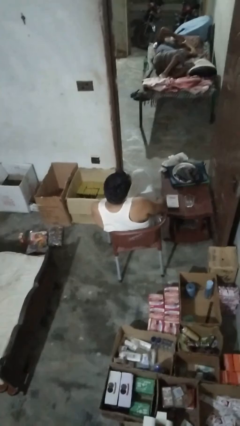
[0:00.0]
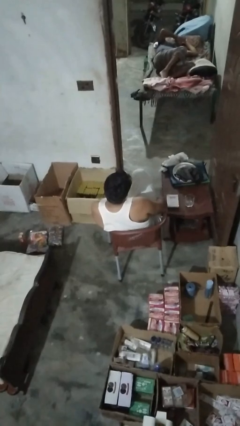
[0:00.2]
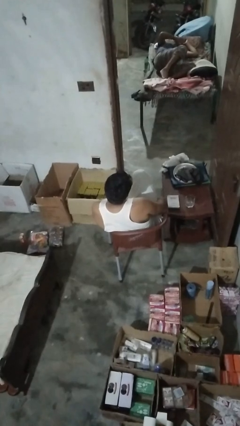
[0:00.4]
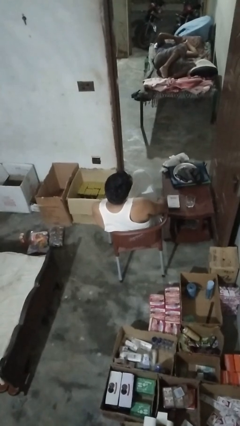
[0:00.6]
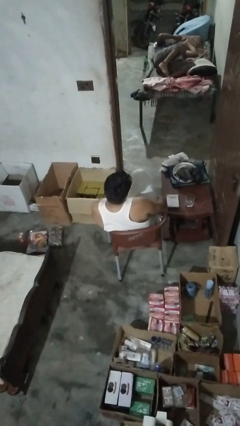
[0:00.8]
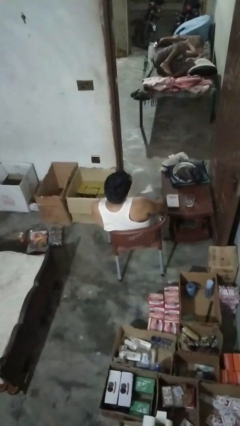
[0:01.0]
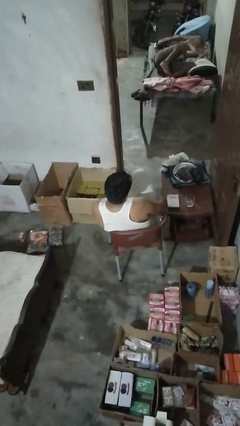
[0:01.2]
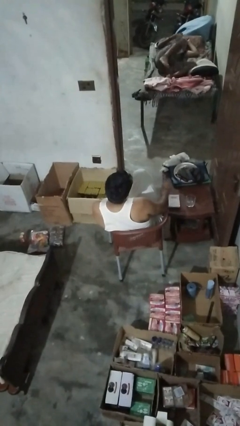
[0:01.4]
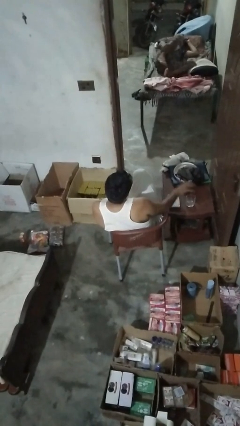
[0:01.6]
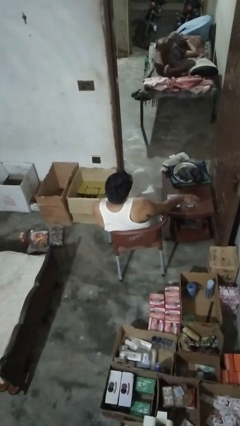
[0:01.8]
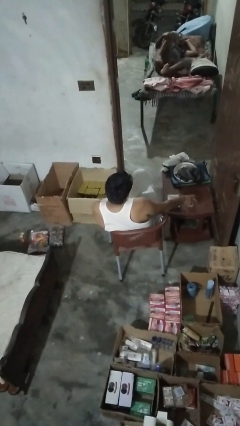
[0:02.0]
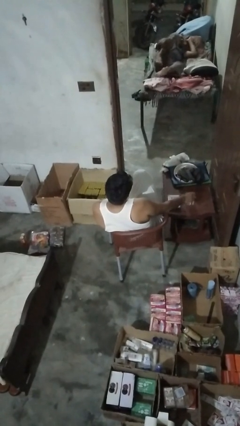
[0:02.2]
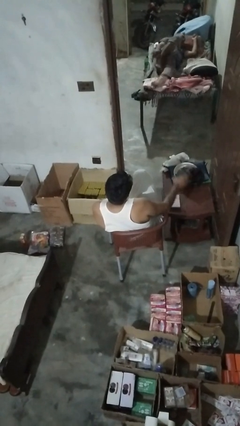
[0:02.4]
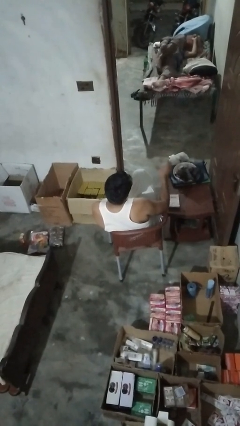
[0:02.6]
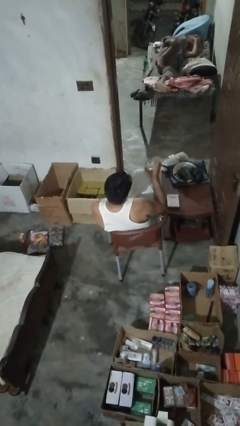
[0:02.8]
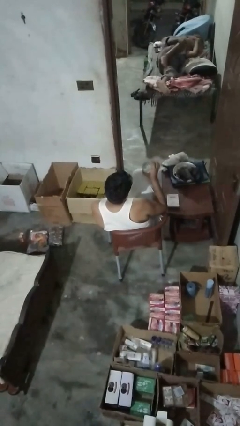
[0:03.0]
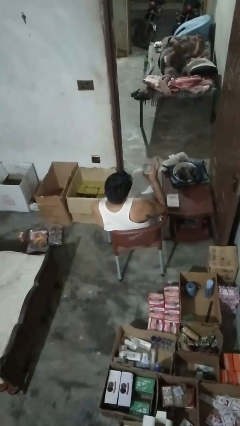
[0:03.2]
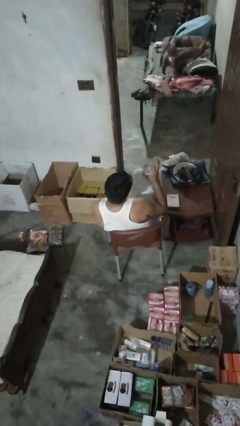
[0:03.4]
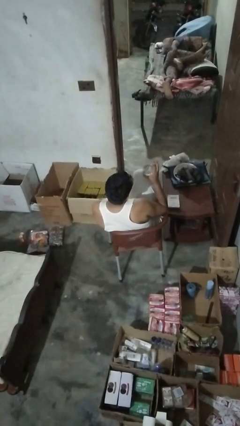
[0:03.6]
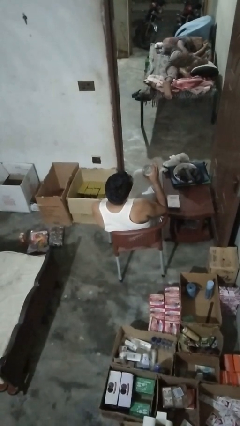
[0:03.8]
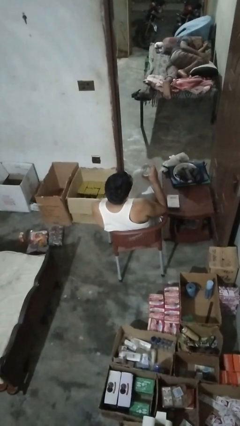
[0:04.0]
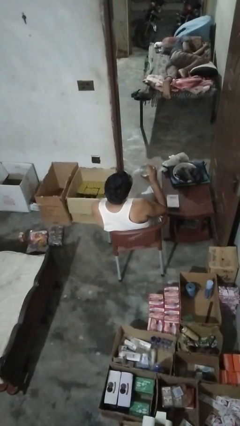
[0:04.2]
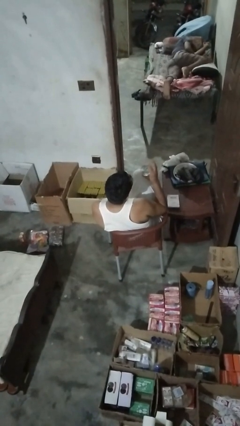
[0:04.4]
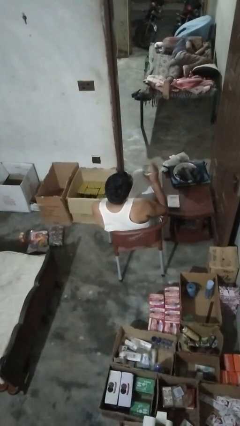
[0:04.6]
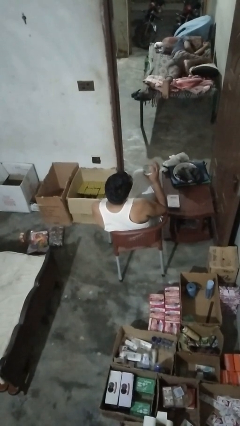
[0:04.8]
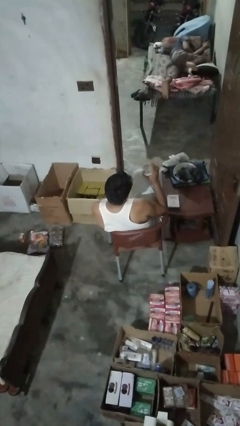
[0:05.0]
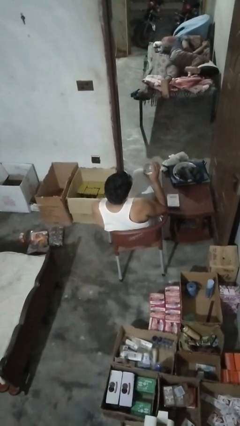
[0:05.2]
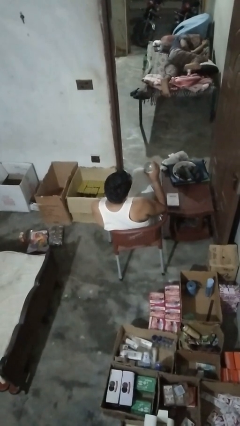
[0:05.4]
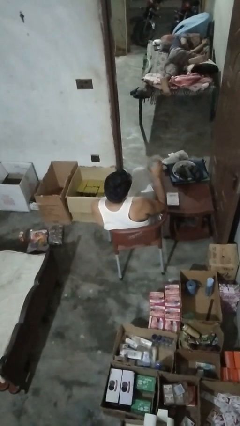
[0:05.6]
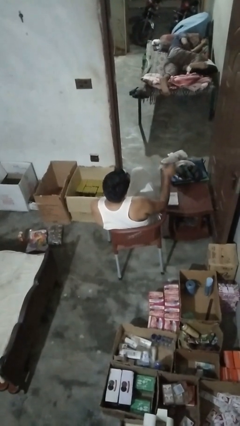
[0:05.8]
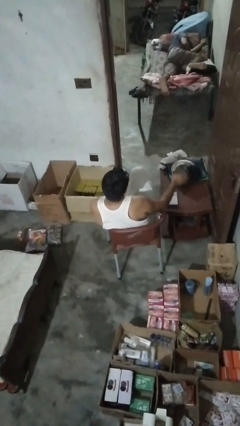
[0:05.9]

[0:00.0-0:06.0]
person knocks over glass

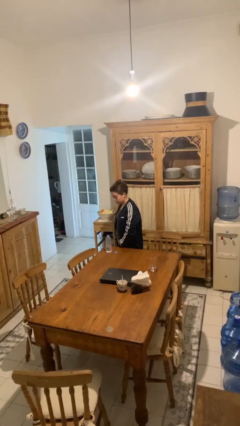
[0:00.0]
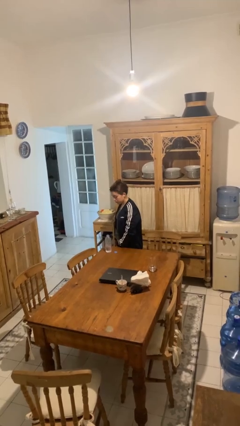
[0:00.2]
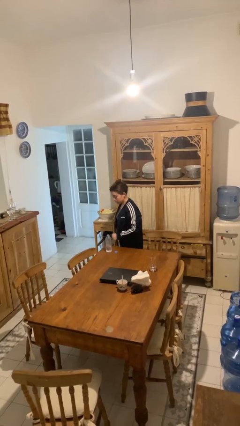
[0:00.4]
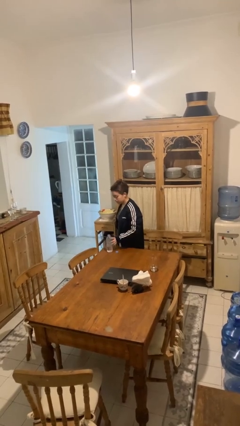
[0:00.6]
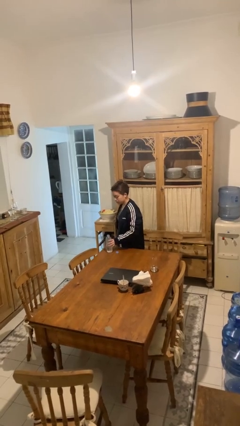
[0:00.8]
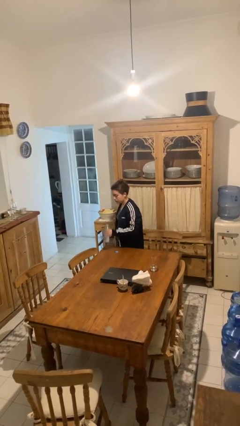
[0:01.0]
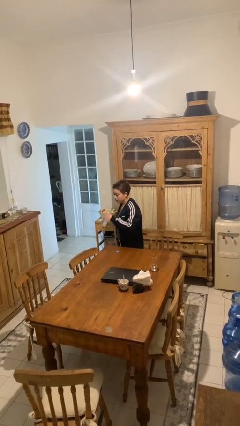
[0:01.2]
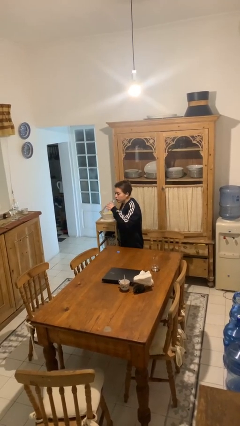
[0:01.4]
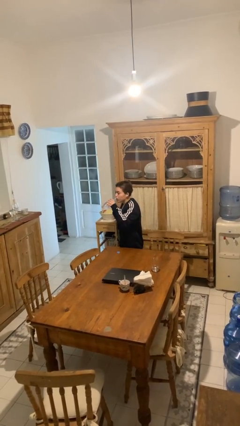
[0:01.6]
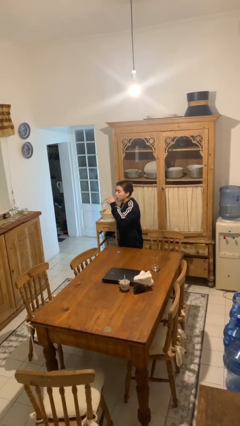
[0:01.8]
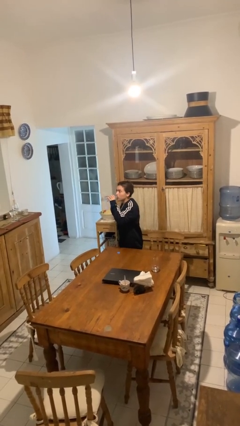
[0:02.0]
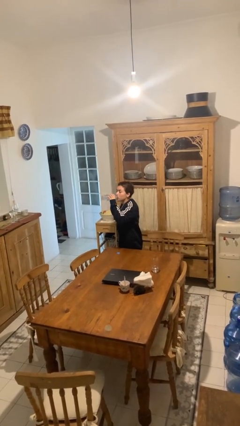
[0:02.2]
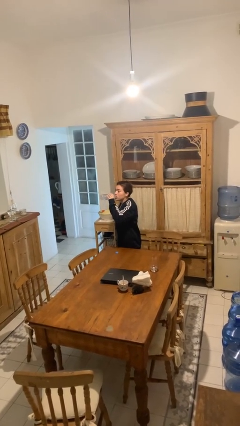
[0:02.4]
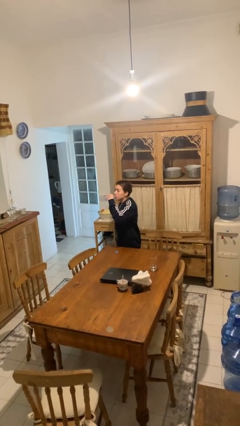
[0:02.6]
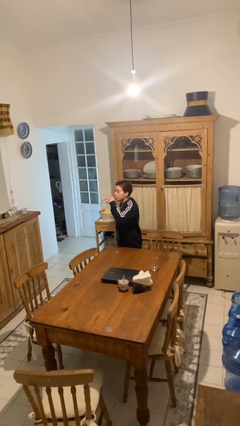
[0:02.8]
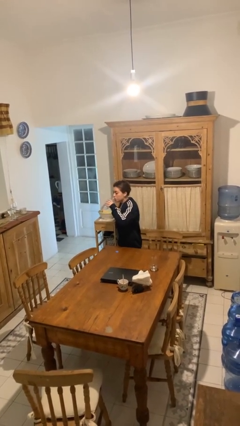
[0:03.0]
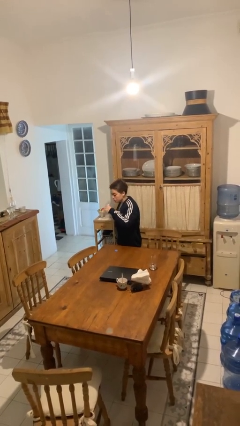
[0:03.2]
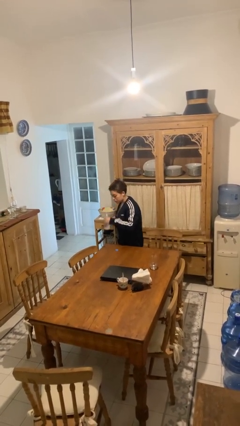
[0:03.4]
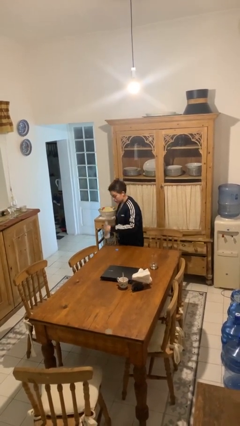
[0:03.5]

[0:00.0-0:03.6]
person drinks from bottle

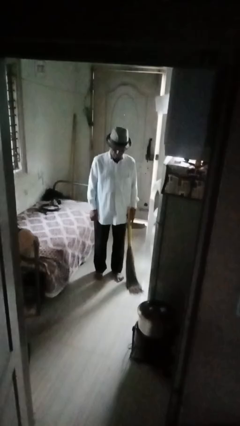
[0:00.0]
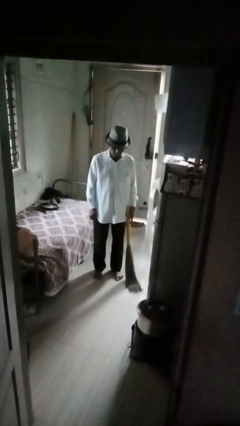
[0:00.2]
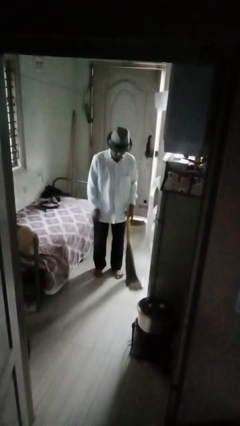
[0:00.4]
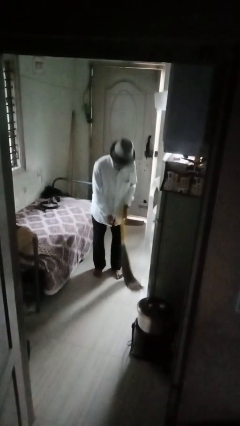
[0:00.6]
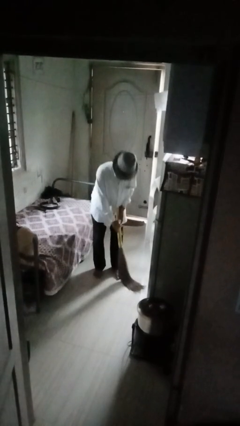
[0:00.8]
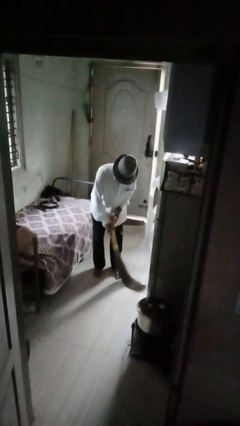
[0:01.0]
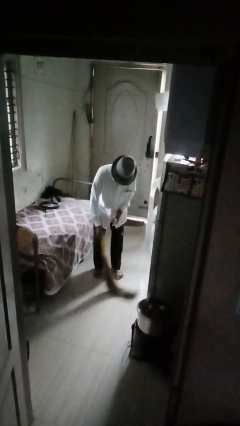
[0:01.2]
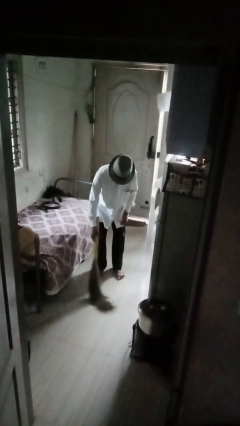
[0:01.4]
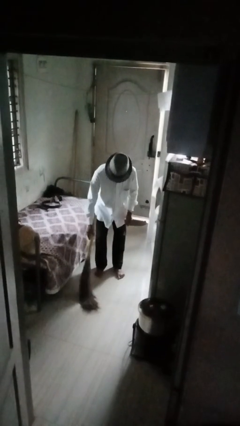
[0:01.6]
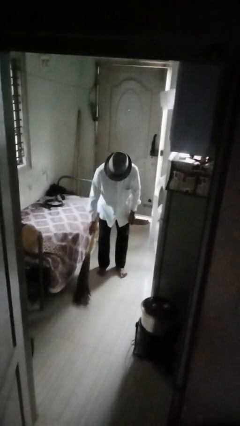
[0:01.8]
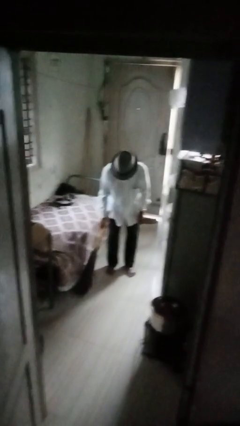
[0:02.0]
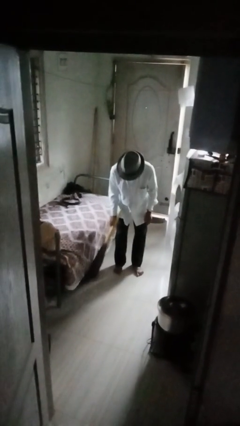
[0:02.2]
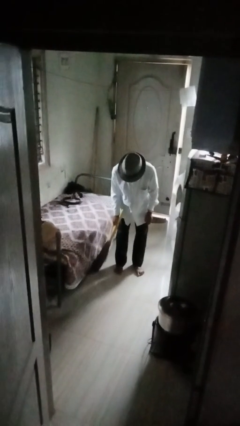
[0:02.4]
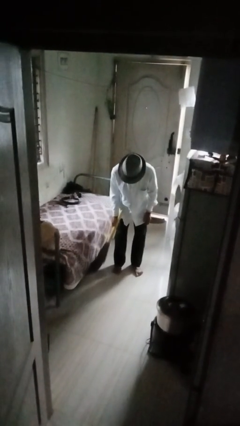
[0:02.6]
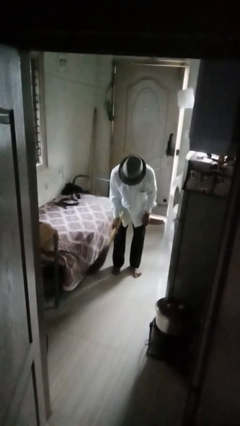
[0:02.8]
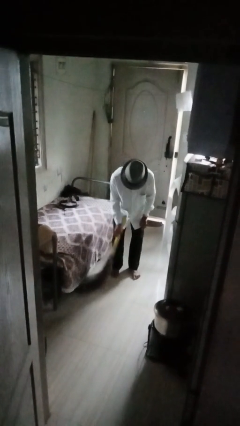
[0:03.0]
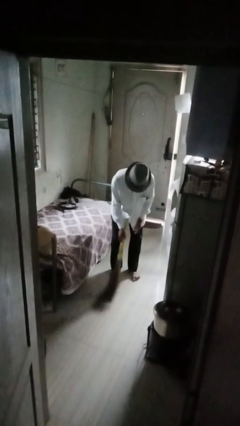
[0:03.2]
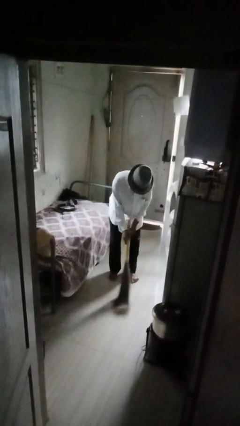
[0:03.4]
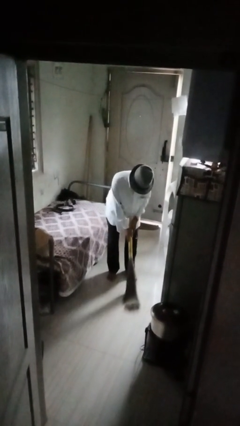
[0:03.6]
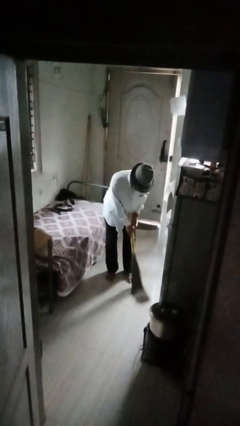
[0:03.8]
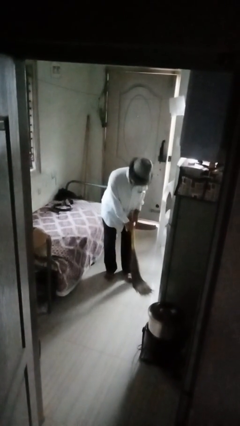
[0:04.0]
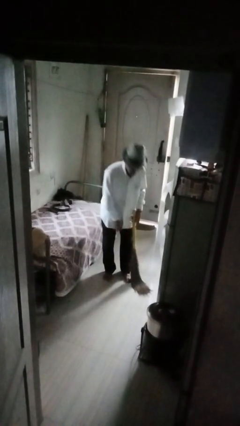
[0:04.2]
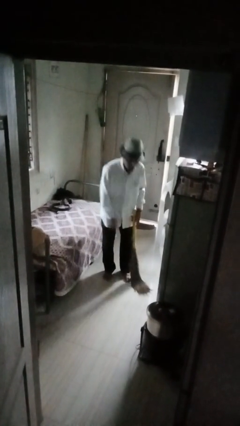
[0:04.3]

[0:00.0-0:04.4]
person sweeps floor

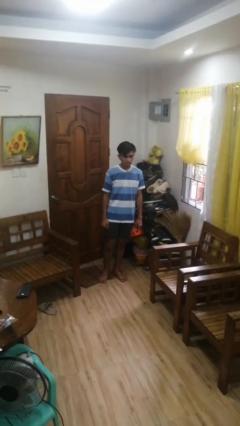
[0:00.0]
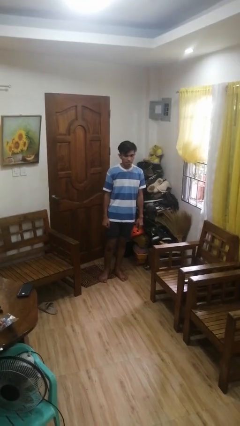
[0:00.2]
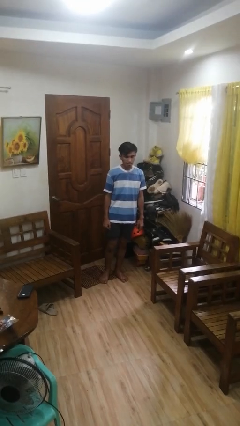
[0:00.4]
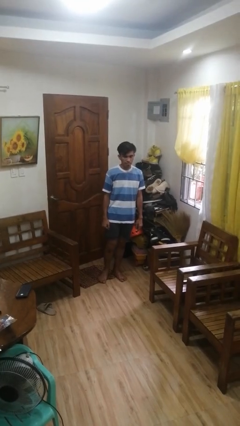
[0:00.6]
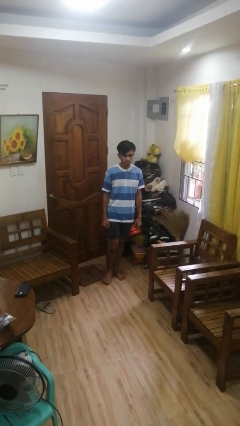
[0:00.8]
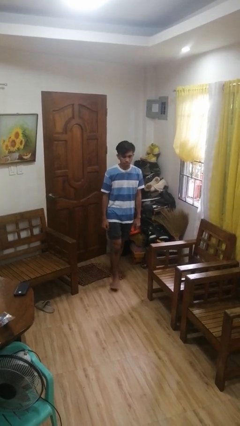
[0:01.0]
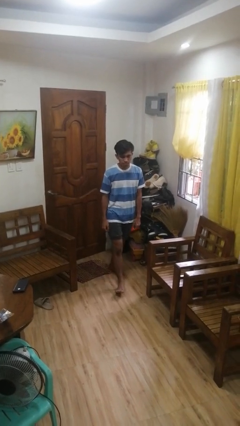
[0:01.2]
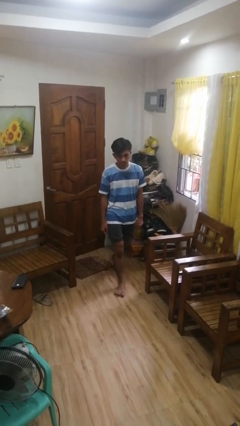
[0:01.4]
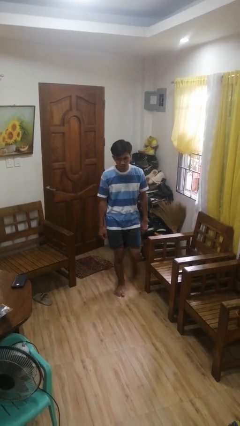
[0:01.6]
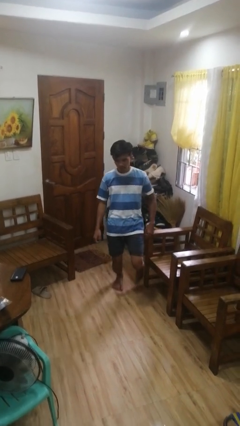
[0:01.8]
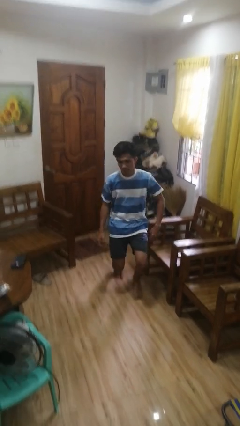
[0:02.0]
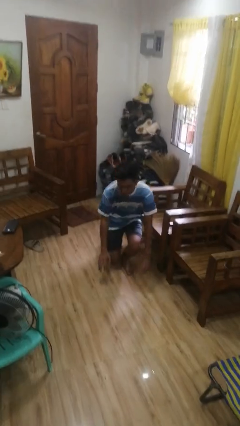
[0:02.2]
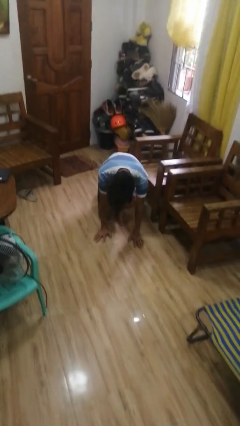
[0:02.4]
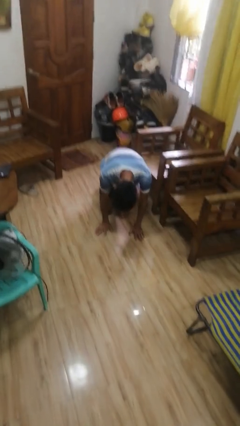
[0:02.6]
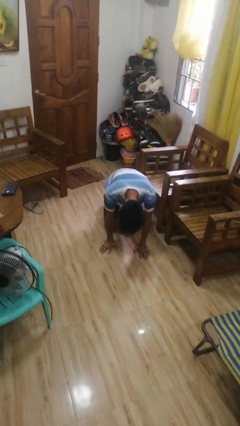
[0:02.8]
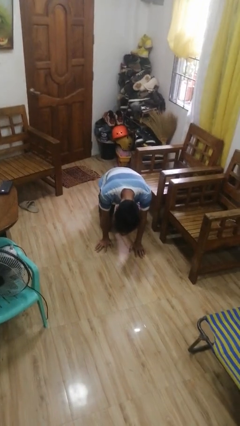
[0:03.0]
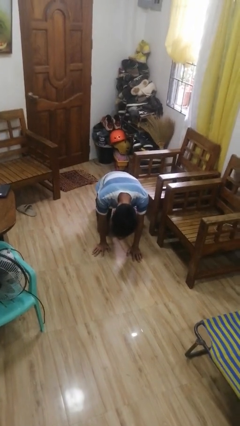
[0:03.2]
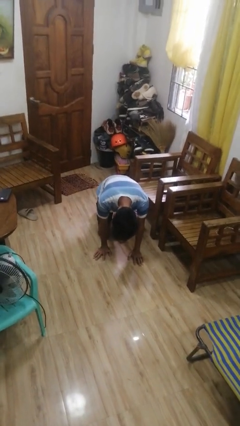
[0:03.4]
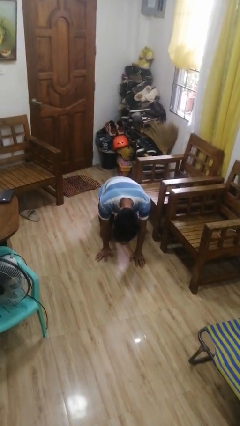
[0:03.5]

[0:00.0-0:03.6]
person trips on object on floor
